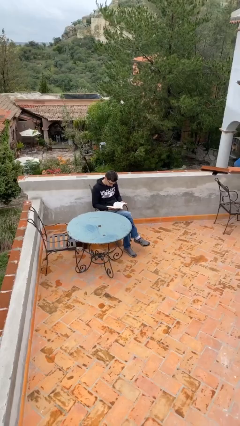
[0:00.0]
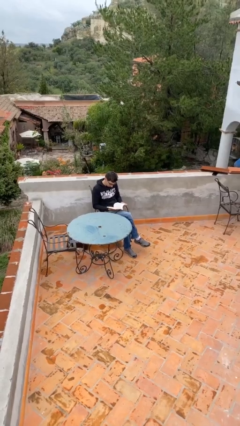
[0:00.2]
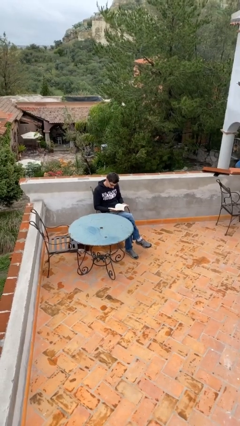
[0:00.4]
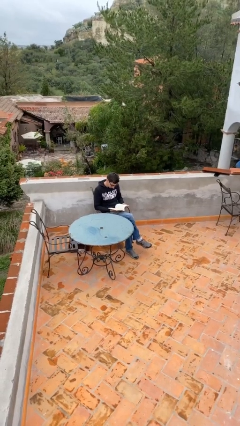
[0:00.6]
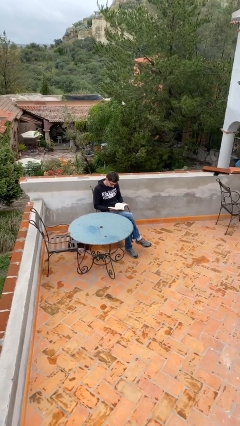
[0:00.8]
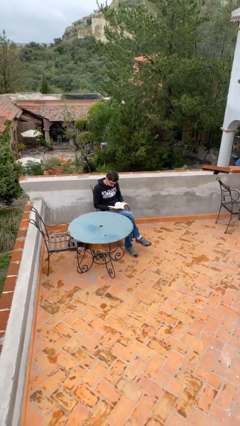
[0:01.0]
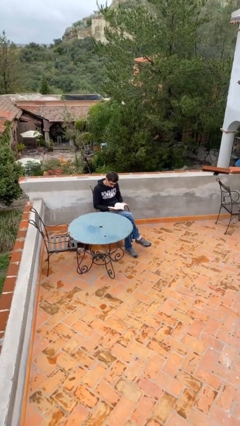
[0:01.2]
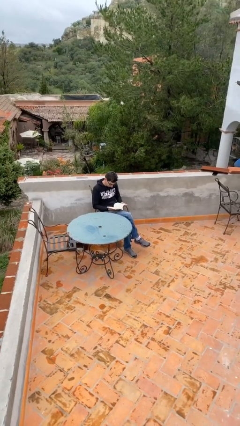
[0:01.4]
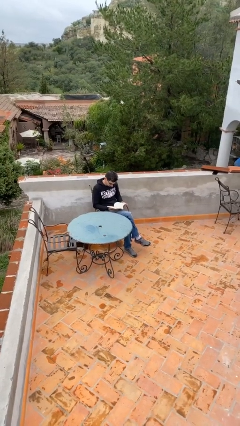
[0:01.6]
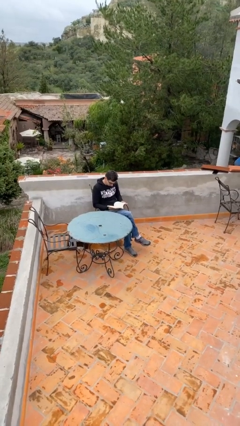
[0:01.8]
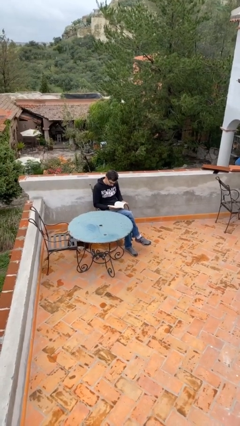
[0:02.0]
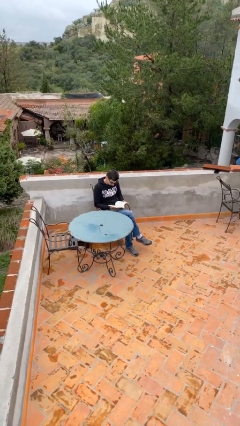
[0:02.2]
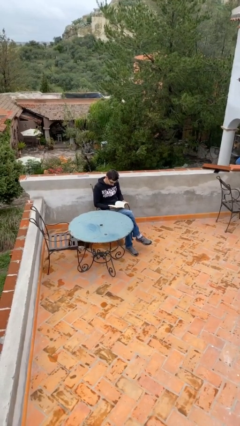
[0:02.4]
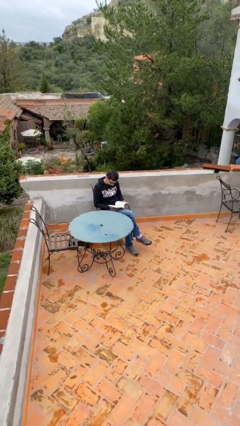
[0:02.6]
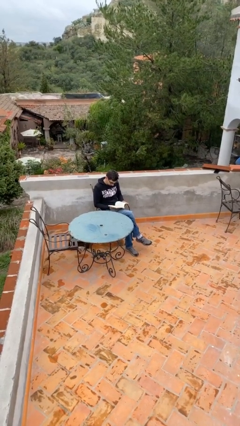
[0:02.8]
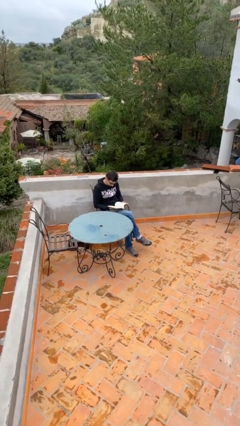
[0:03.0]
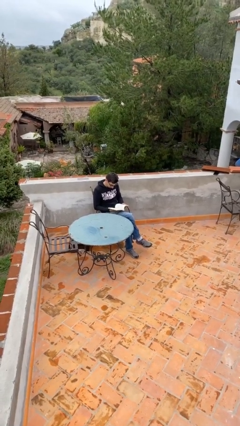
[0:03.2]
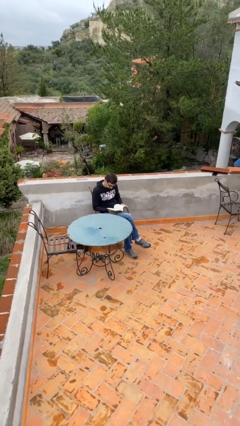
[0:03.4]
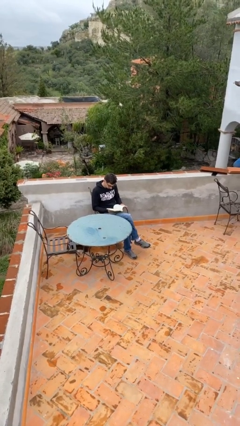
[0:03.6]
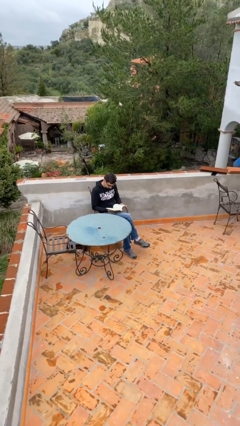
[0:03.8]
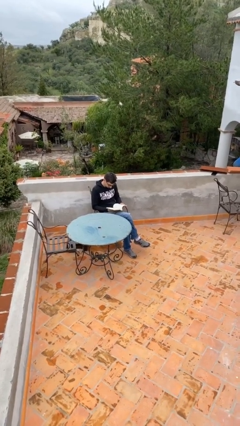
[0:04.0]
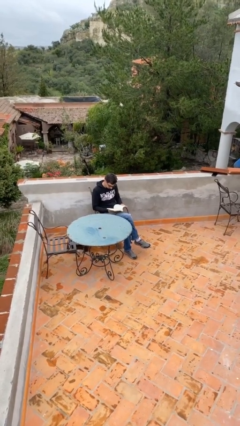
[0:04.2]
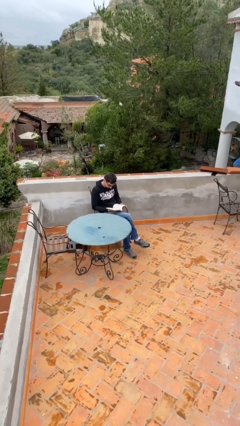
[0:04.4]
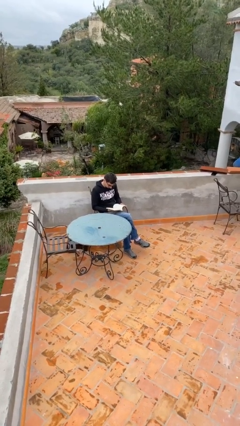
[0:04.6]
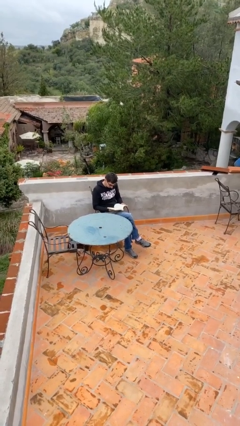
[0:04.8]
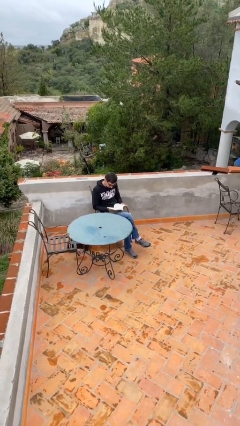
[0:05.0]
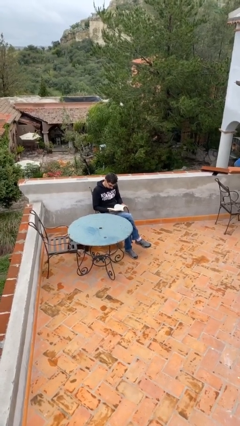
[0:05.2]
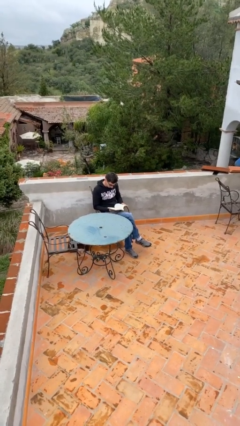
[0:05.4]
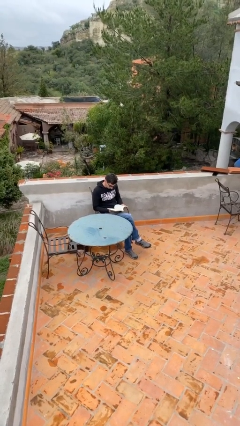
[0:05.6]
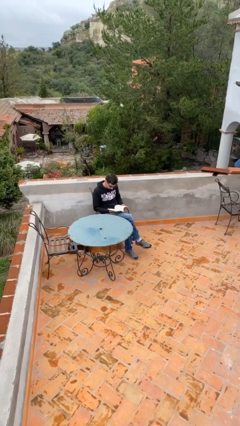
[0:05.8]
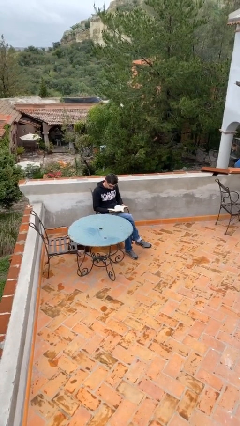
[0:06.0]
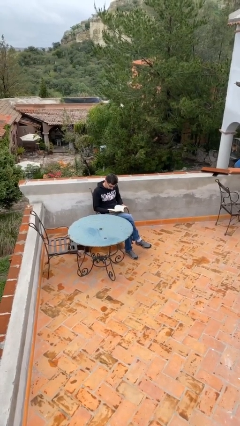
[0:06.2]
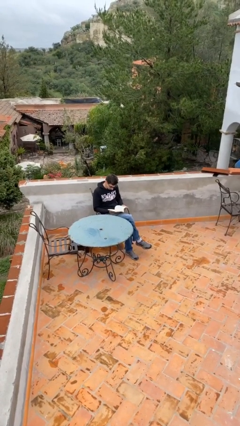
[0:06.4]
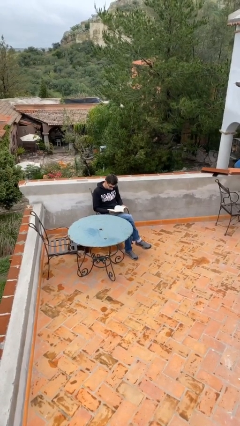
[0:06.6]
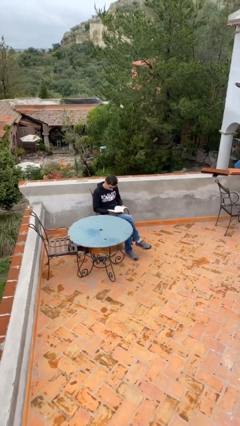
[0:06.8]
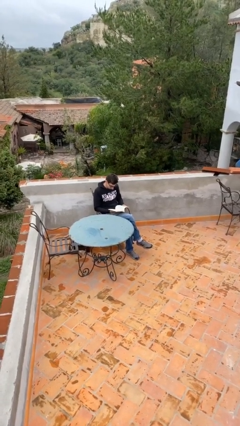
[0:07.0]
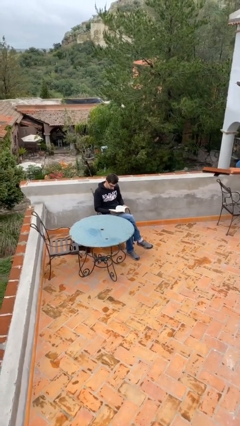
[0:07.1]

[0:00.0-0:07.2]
person reads document

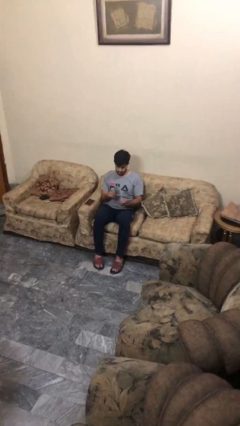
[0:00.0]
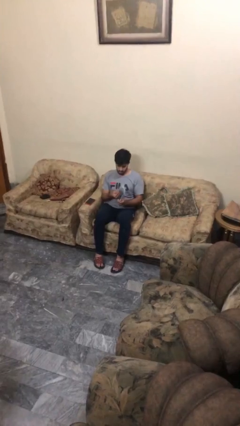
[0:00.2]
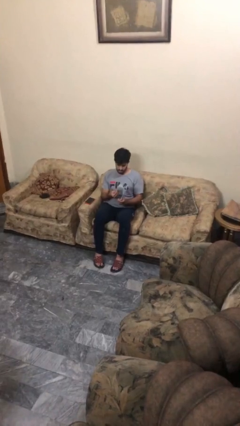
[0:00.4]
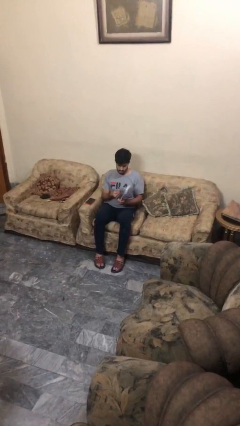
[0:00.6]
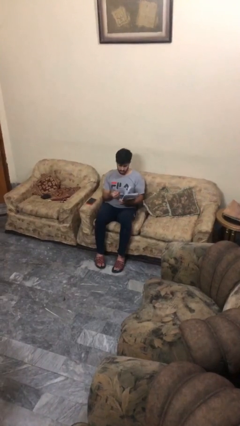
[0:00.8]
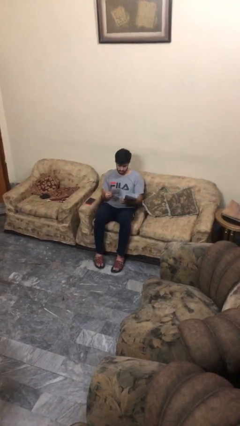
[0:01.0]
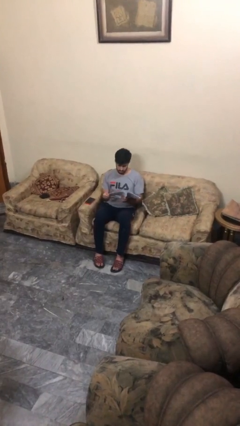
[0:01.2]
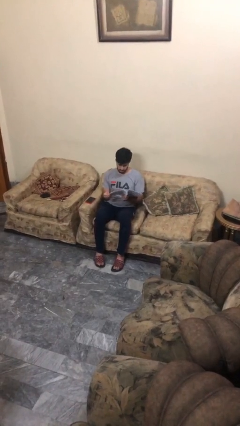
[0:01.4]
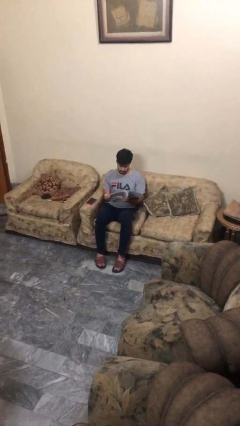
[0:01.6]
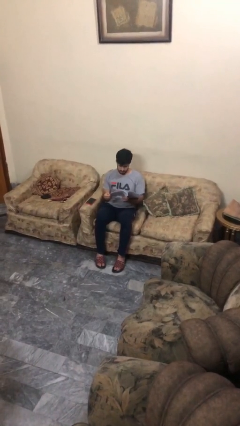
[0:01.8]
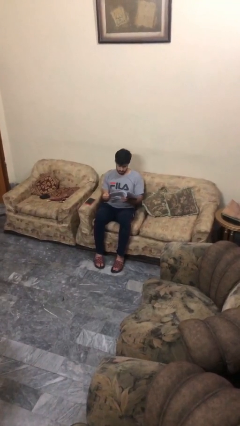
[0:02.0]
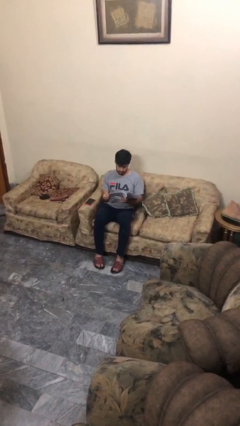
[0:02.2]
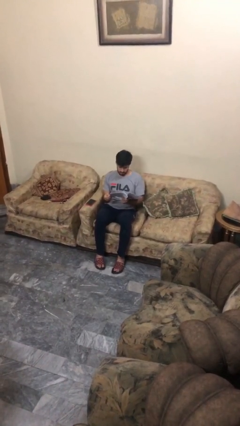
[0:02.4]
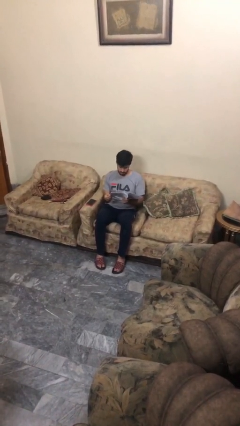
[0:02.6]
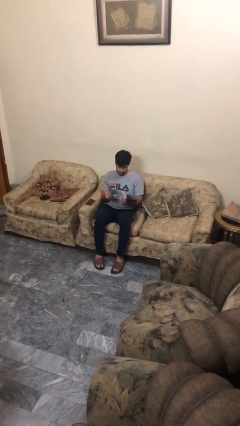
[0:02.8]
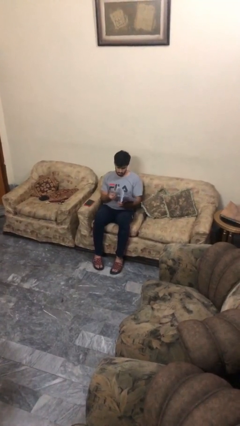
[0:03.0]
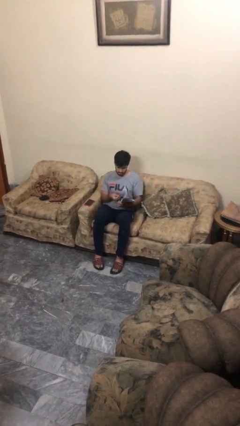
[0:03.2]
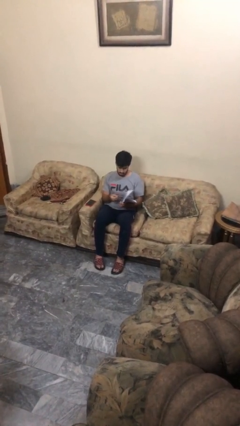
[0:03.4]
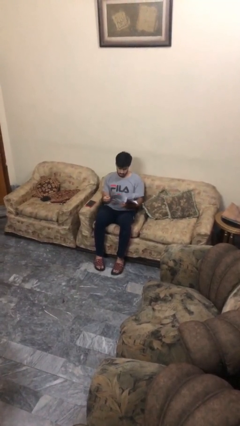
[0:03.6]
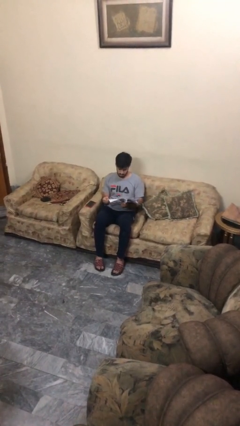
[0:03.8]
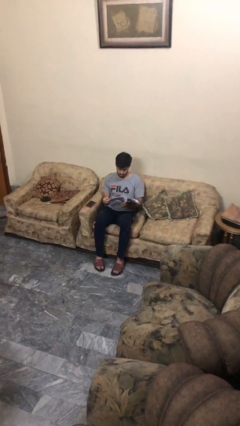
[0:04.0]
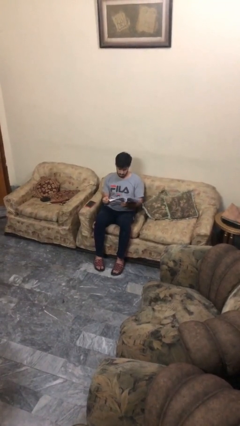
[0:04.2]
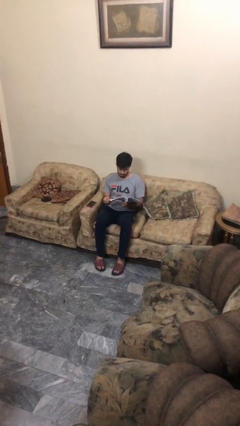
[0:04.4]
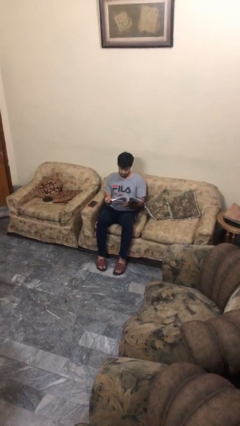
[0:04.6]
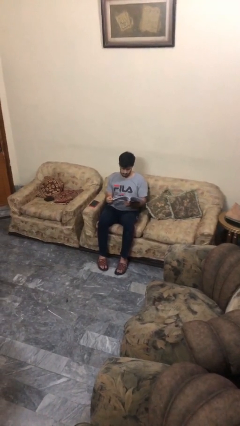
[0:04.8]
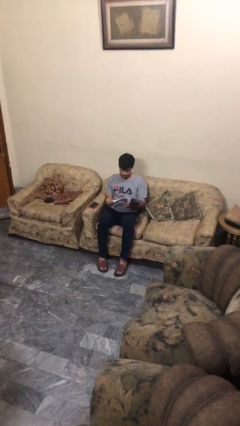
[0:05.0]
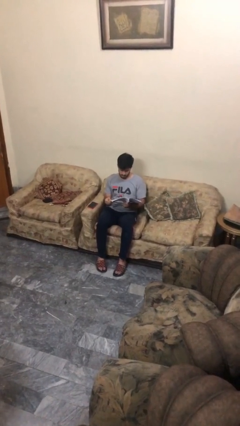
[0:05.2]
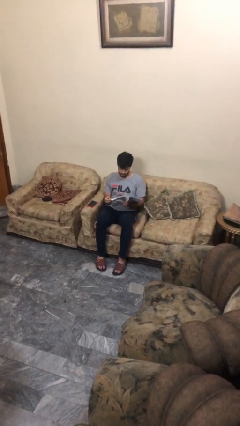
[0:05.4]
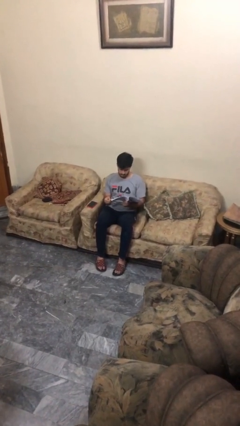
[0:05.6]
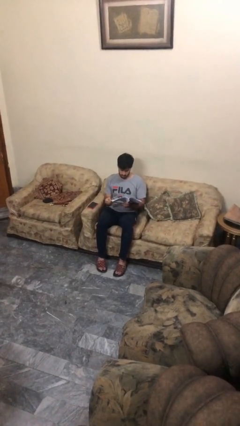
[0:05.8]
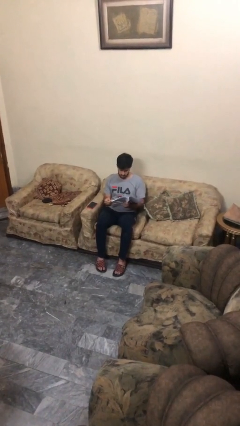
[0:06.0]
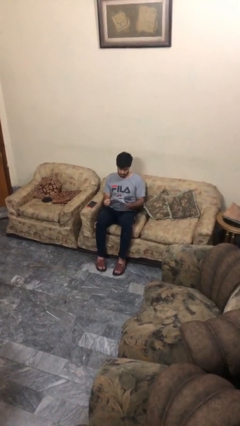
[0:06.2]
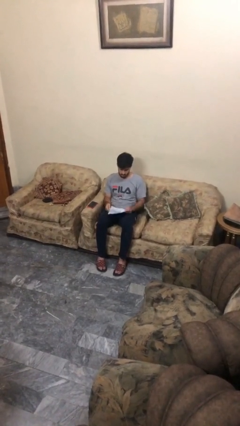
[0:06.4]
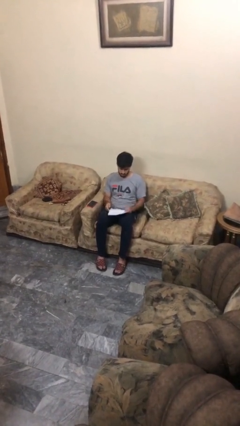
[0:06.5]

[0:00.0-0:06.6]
person reads magazine

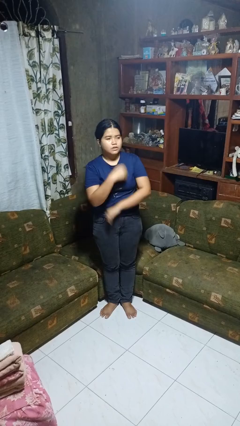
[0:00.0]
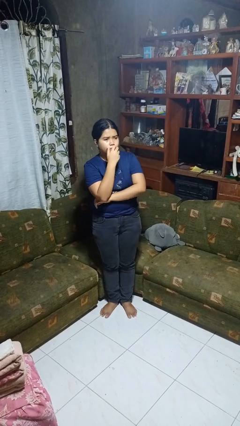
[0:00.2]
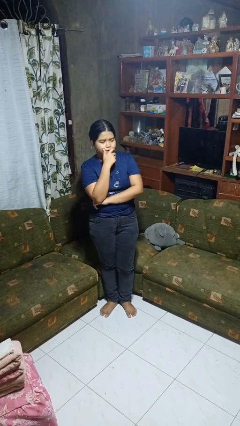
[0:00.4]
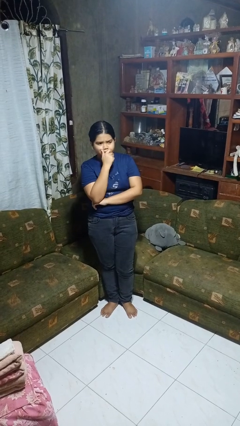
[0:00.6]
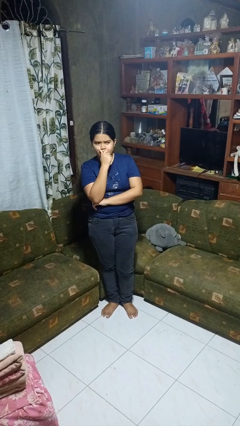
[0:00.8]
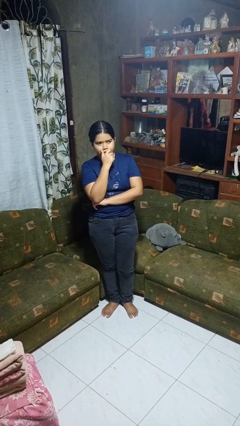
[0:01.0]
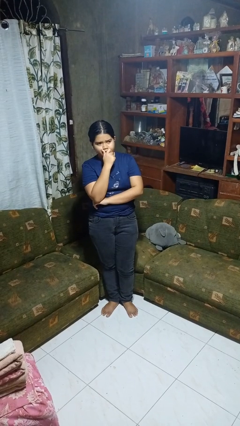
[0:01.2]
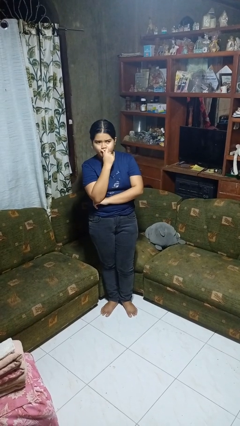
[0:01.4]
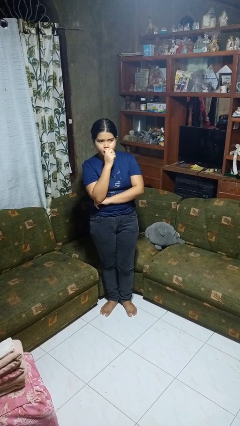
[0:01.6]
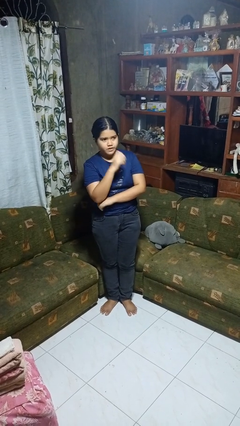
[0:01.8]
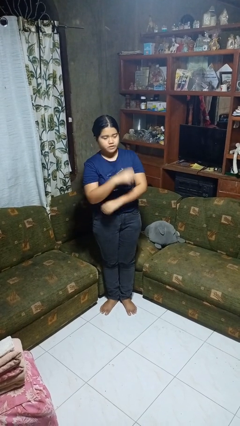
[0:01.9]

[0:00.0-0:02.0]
person strokes chin

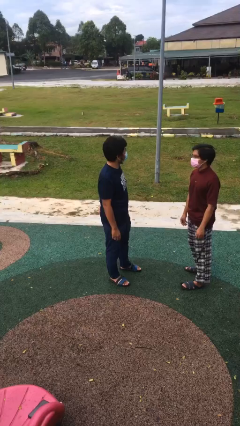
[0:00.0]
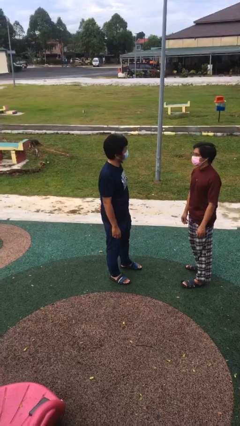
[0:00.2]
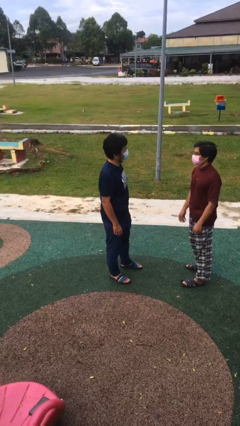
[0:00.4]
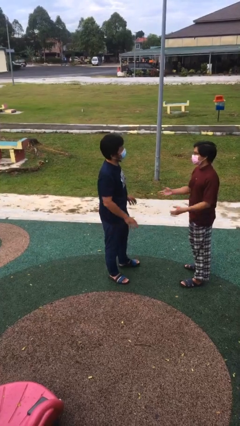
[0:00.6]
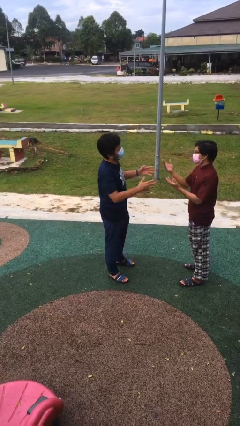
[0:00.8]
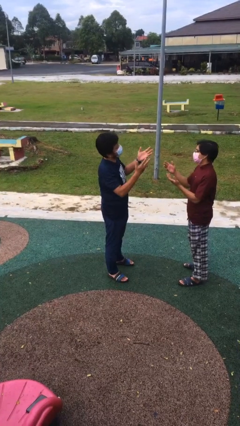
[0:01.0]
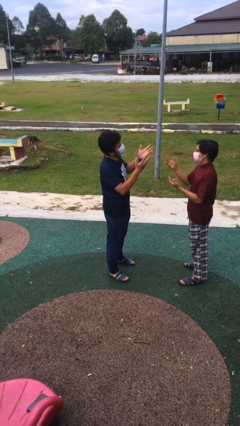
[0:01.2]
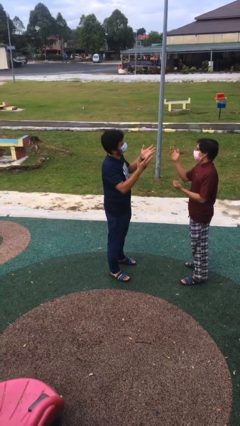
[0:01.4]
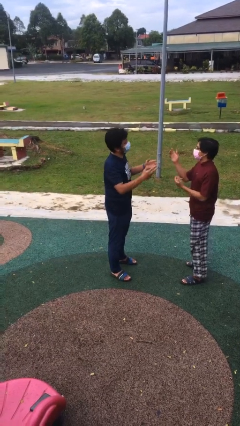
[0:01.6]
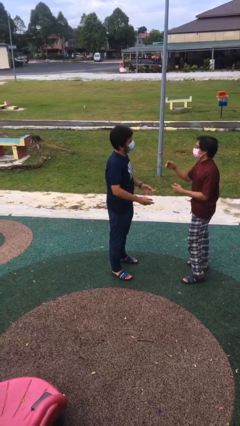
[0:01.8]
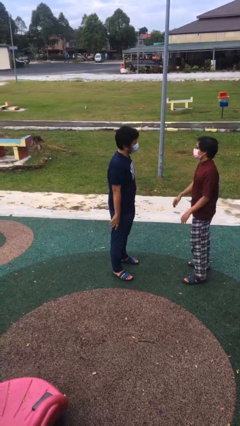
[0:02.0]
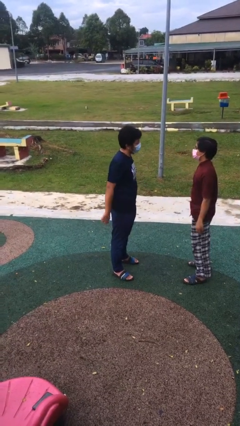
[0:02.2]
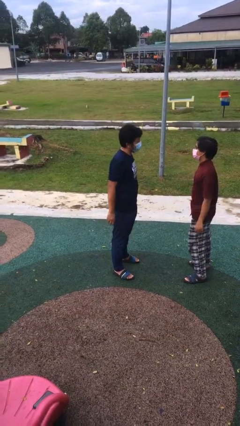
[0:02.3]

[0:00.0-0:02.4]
person talks to person
